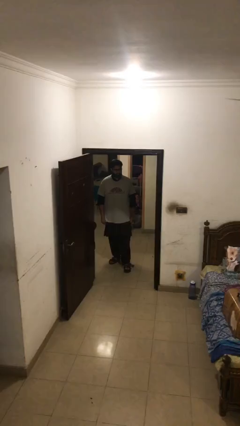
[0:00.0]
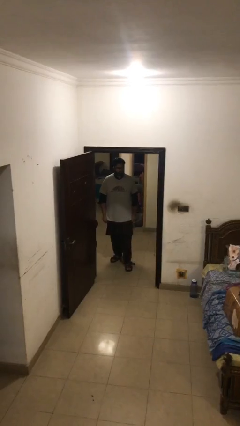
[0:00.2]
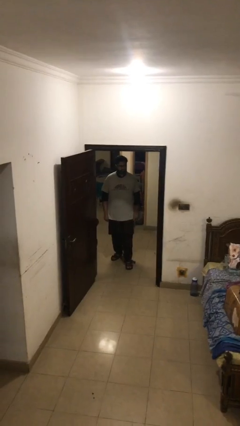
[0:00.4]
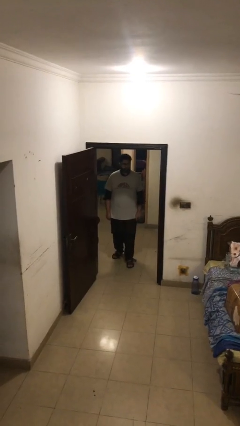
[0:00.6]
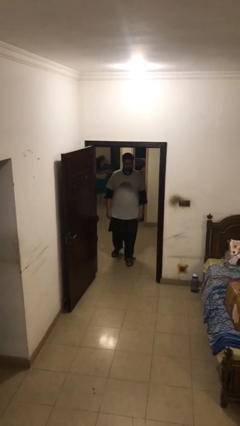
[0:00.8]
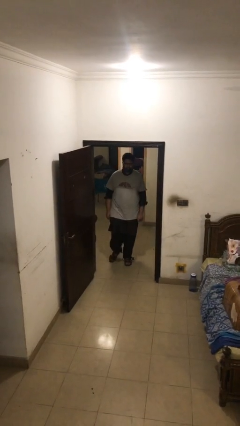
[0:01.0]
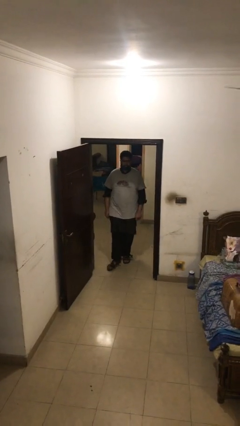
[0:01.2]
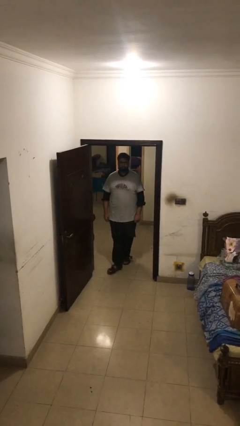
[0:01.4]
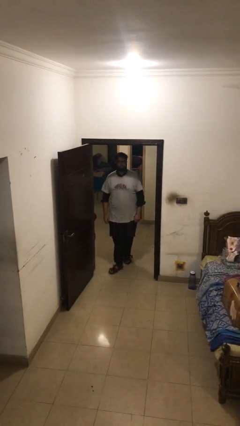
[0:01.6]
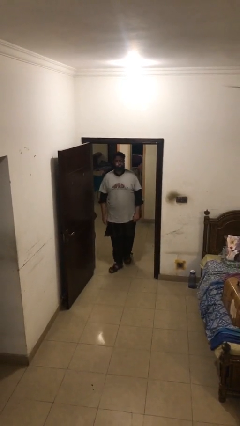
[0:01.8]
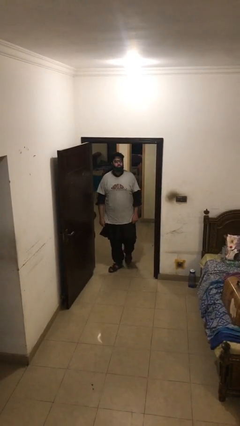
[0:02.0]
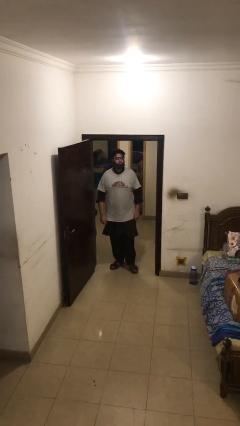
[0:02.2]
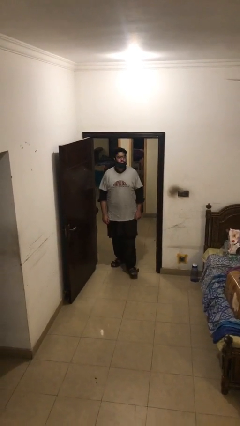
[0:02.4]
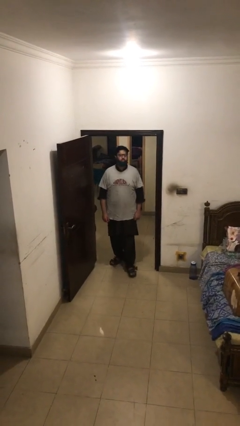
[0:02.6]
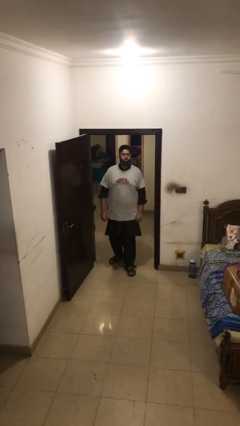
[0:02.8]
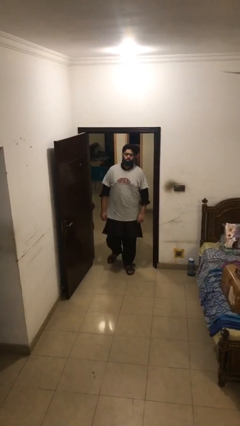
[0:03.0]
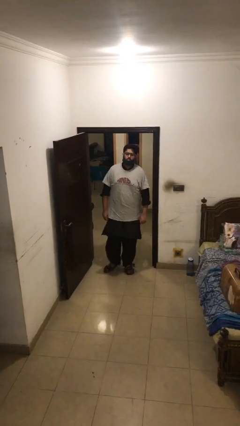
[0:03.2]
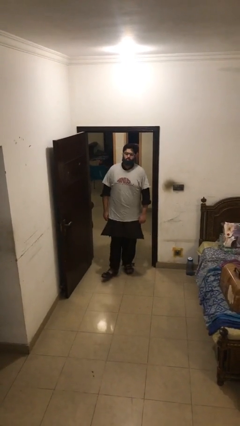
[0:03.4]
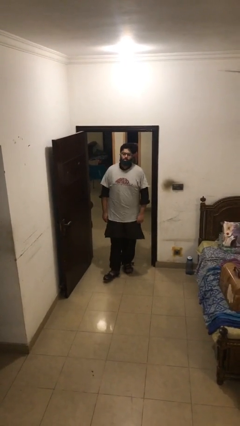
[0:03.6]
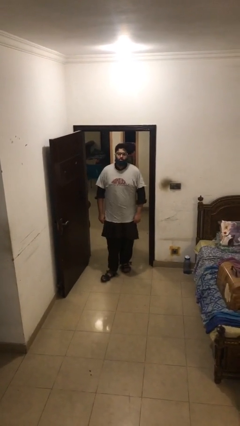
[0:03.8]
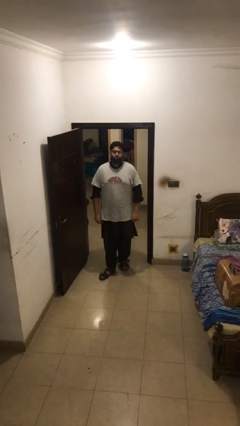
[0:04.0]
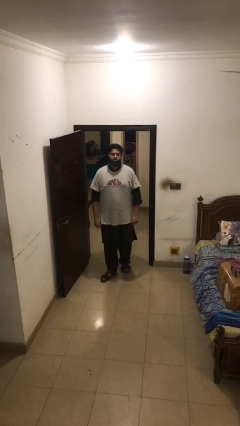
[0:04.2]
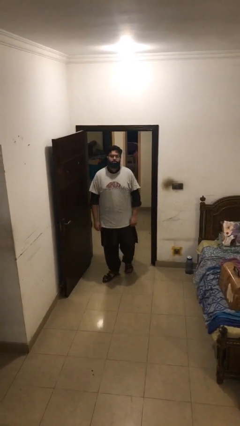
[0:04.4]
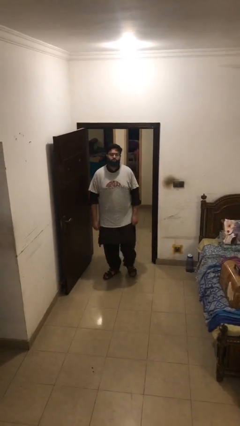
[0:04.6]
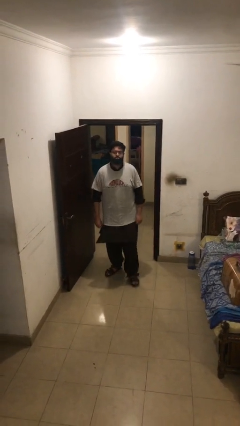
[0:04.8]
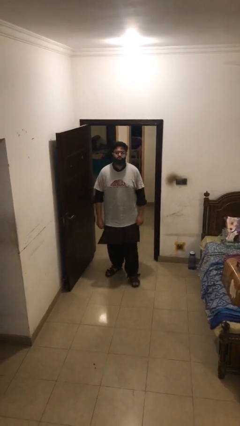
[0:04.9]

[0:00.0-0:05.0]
person enters scene through structure

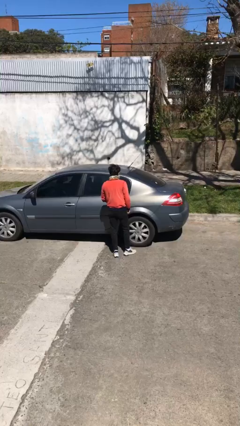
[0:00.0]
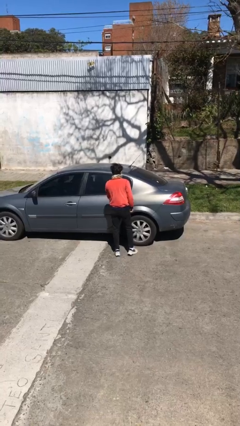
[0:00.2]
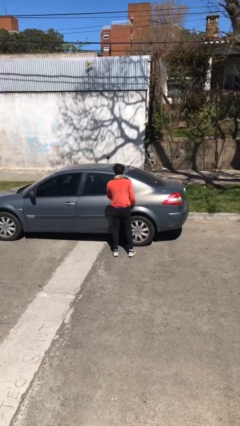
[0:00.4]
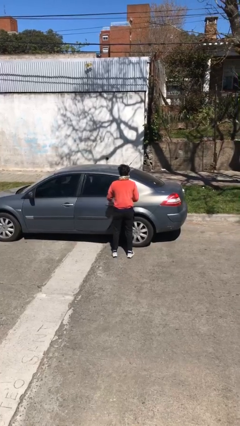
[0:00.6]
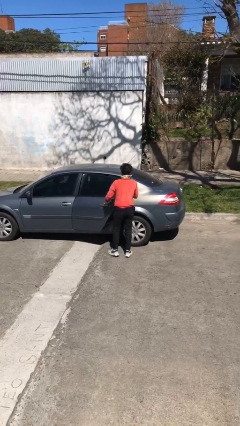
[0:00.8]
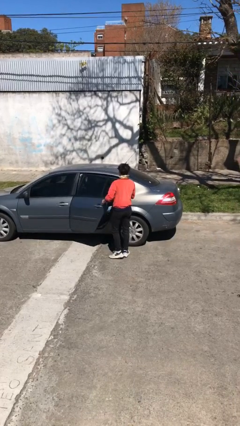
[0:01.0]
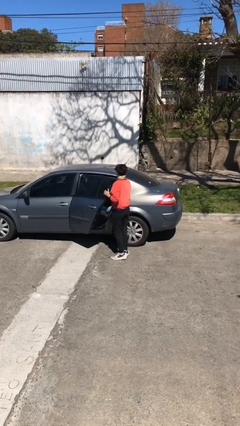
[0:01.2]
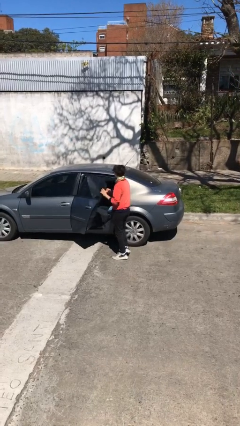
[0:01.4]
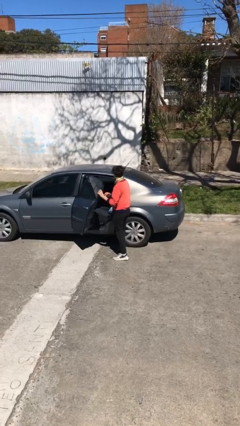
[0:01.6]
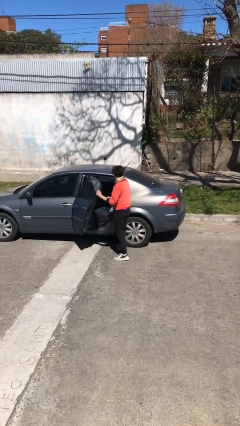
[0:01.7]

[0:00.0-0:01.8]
person opens car door

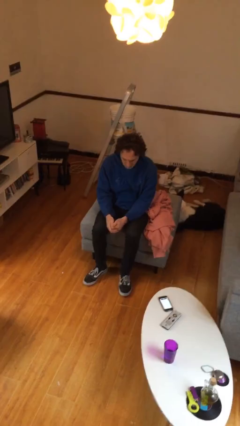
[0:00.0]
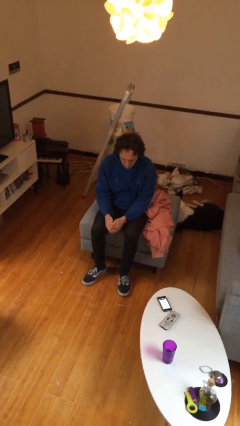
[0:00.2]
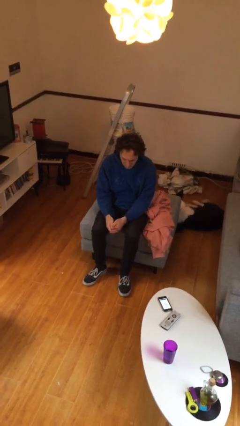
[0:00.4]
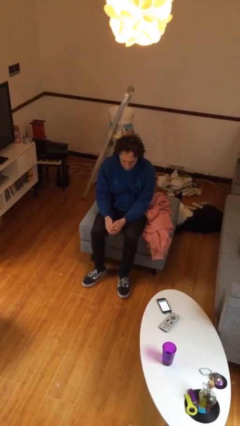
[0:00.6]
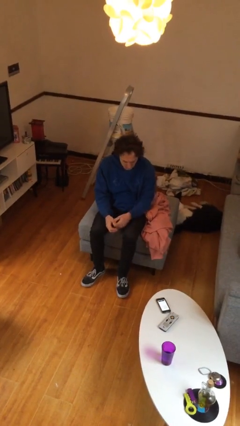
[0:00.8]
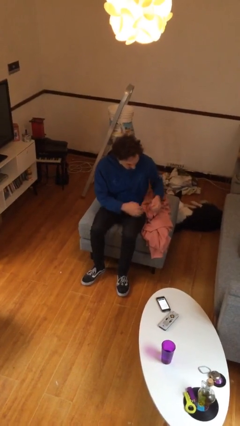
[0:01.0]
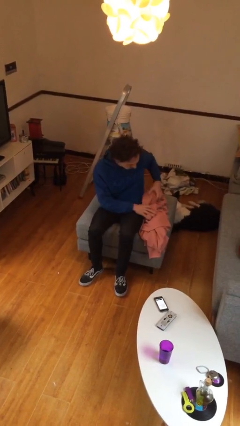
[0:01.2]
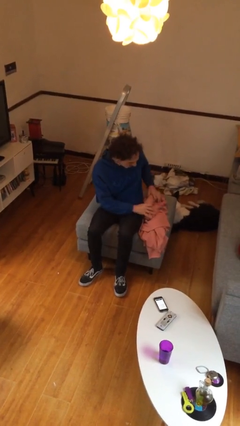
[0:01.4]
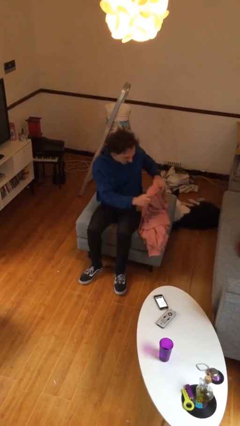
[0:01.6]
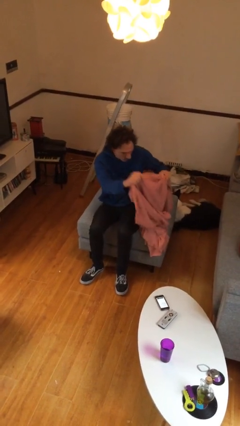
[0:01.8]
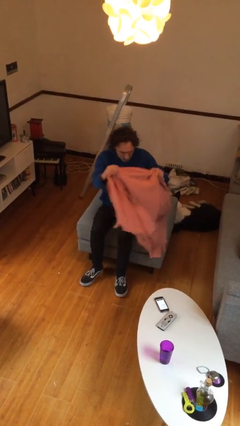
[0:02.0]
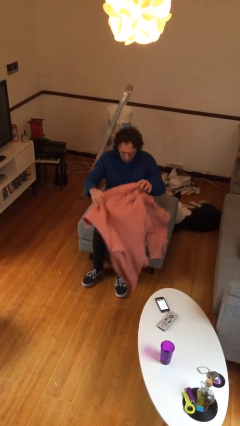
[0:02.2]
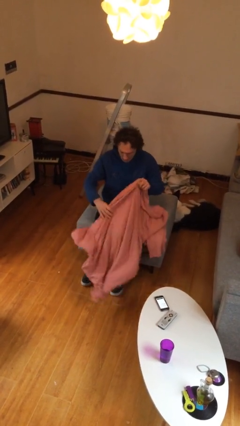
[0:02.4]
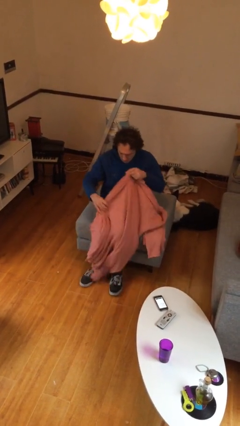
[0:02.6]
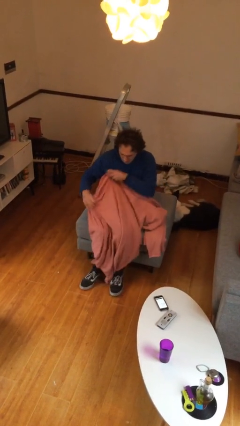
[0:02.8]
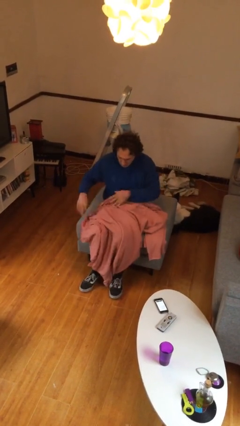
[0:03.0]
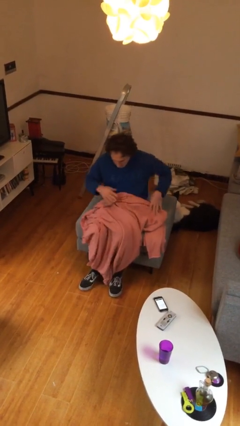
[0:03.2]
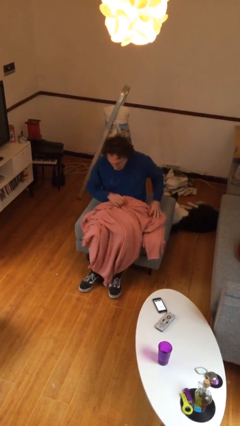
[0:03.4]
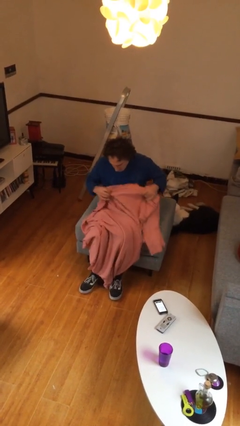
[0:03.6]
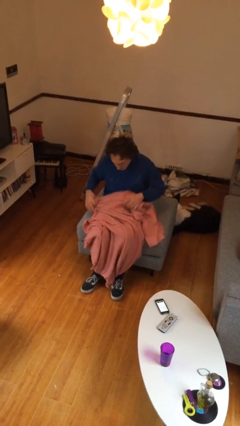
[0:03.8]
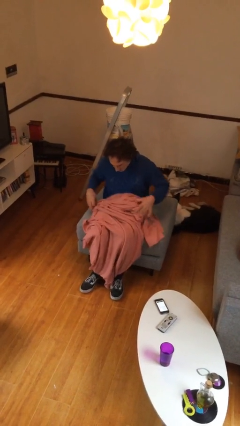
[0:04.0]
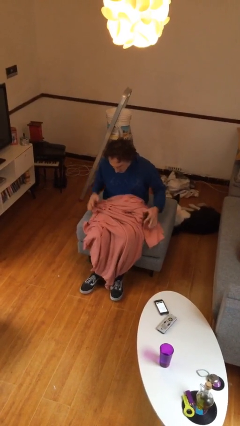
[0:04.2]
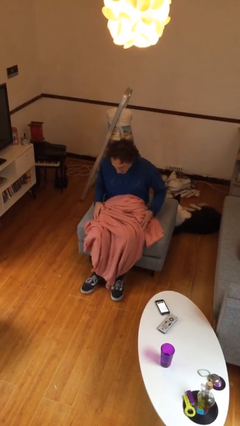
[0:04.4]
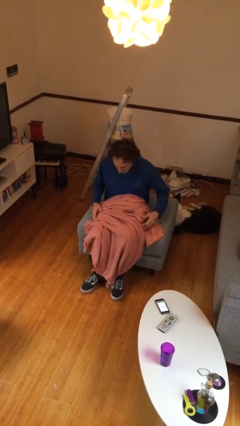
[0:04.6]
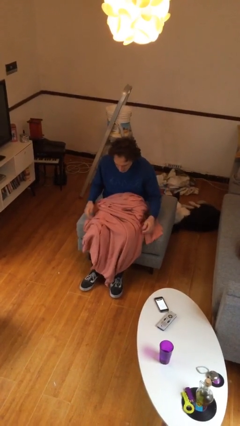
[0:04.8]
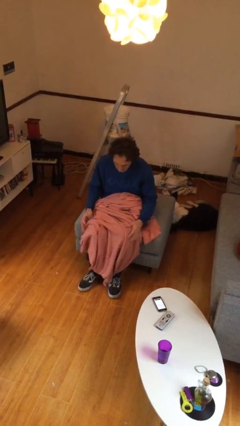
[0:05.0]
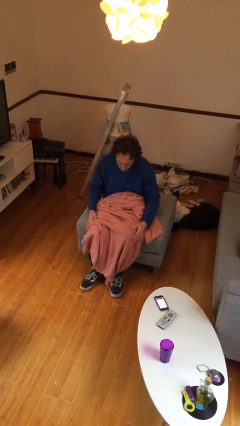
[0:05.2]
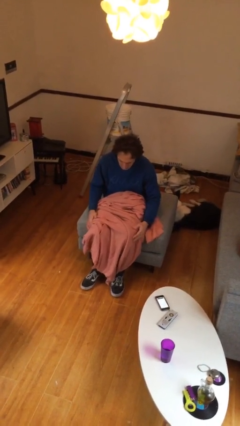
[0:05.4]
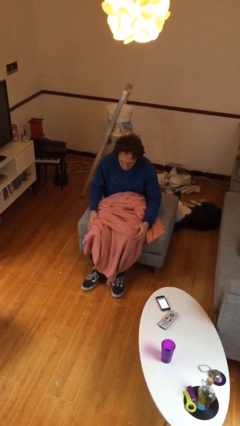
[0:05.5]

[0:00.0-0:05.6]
person covers with blanket

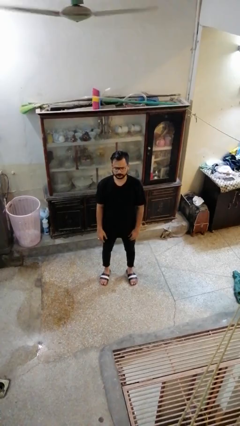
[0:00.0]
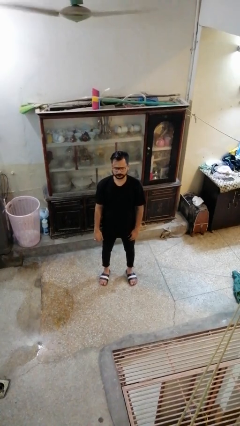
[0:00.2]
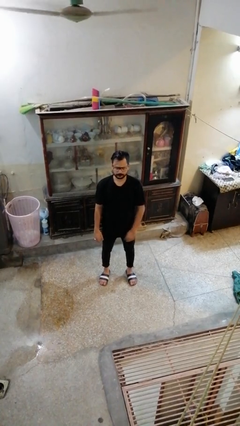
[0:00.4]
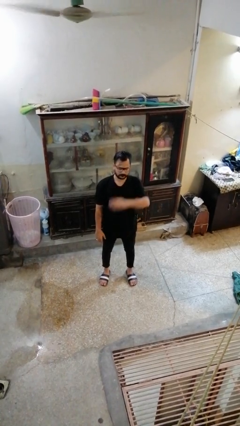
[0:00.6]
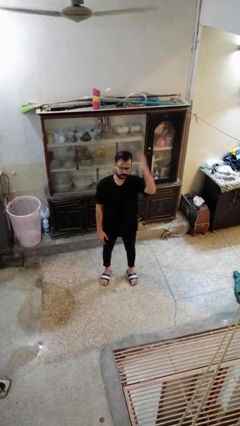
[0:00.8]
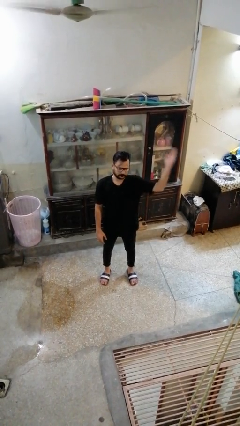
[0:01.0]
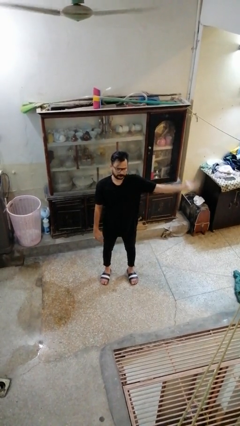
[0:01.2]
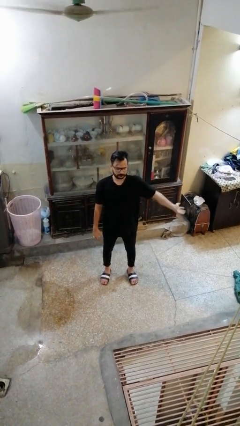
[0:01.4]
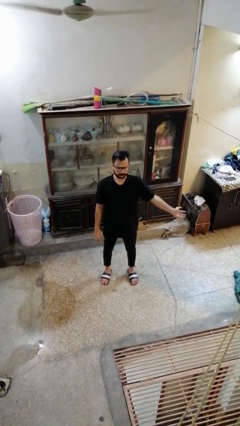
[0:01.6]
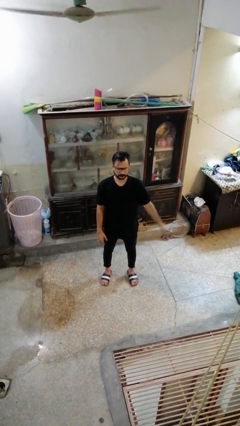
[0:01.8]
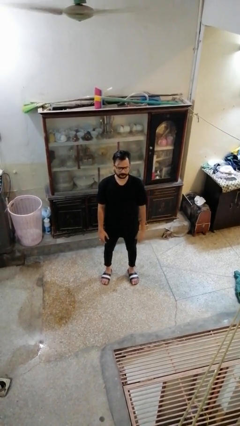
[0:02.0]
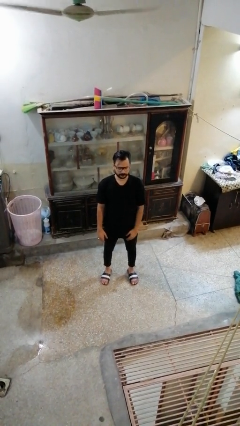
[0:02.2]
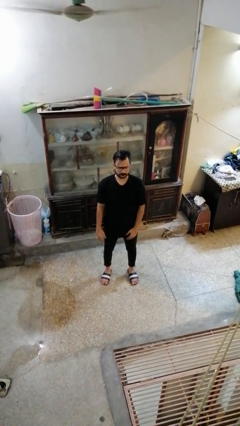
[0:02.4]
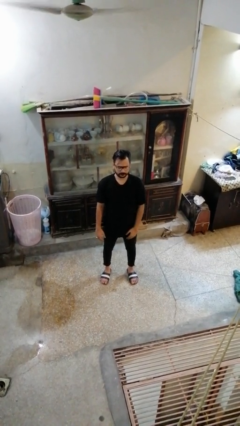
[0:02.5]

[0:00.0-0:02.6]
person gestures swipe left

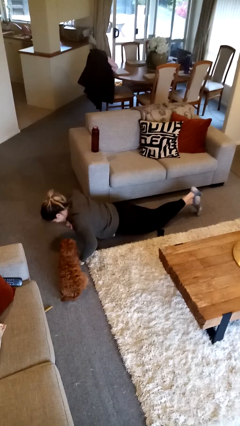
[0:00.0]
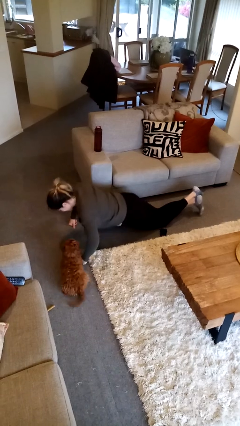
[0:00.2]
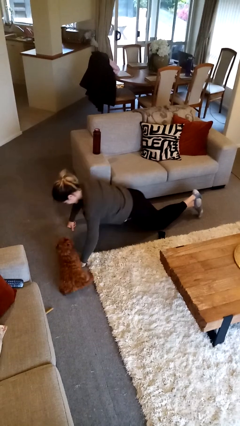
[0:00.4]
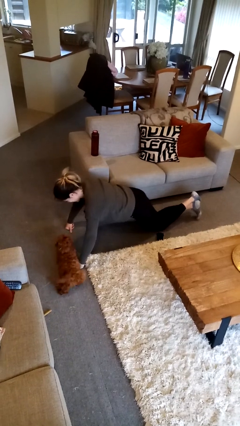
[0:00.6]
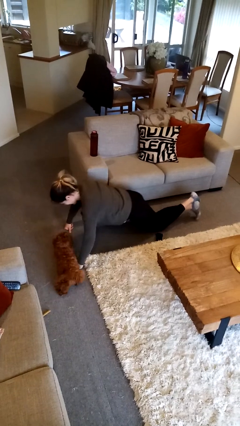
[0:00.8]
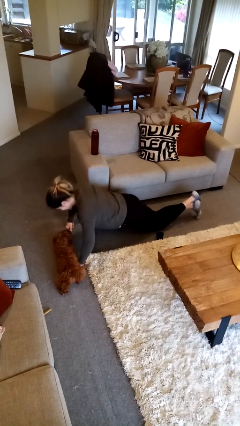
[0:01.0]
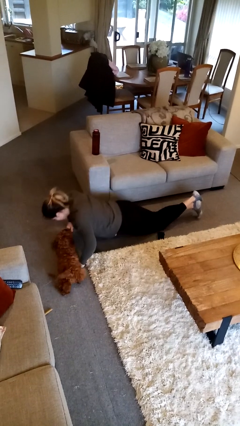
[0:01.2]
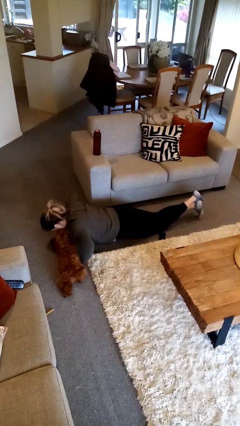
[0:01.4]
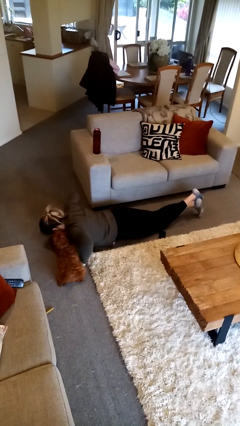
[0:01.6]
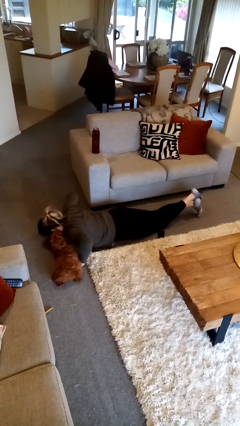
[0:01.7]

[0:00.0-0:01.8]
person exercises with pushup

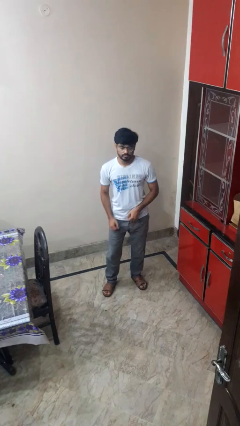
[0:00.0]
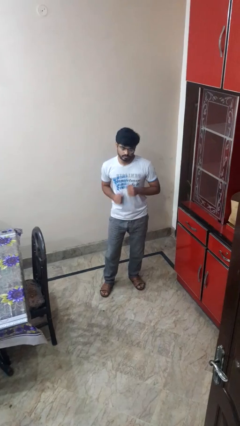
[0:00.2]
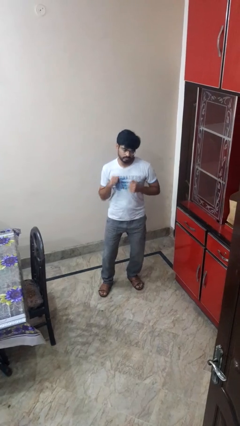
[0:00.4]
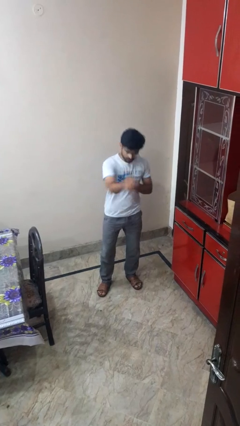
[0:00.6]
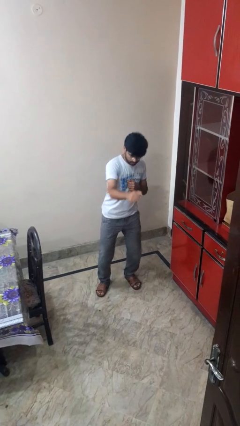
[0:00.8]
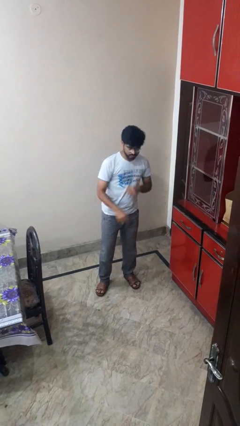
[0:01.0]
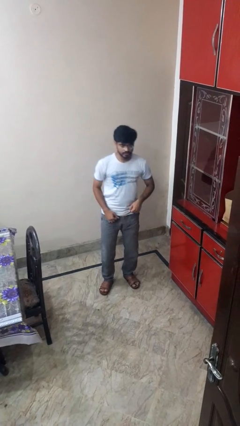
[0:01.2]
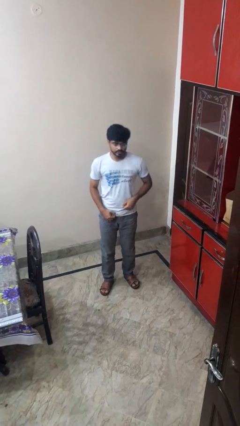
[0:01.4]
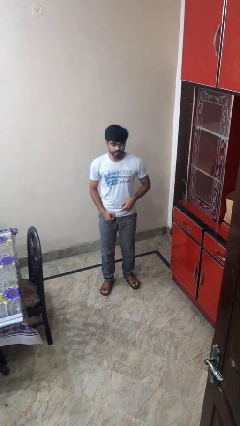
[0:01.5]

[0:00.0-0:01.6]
person punches
